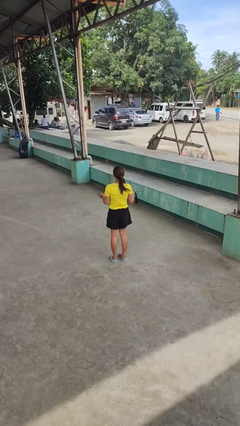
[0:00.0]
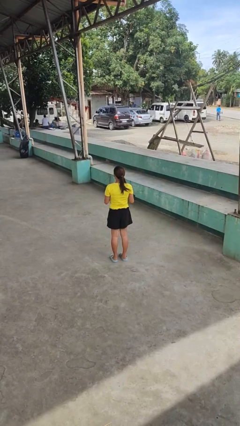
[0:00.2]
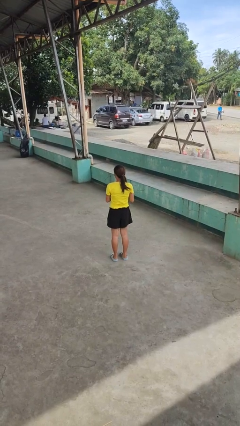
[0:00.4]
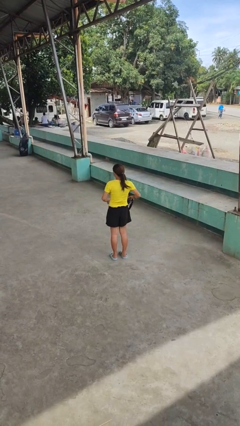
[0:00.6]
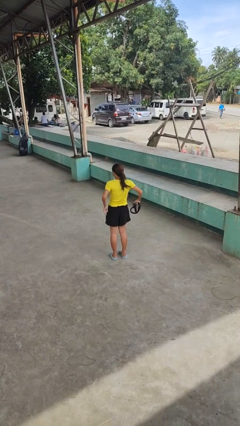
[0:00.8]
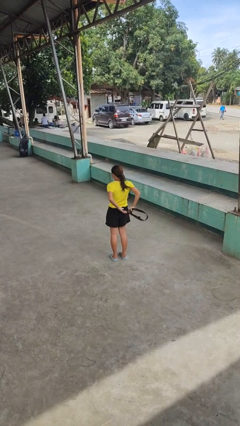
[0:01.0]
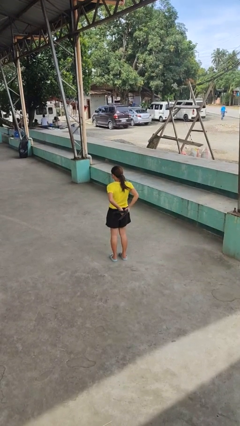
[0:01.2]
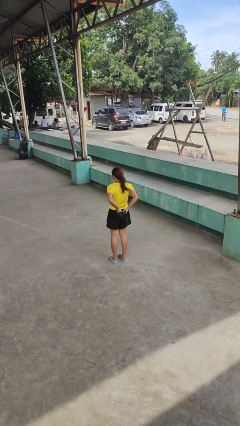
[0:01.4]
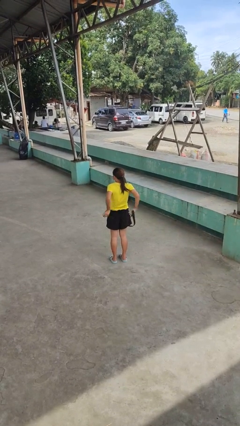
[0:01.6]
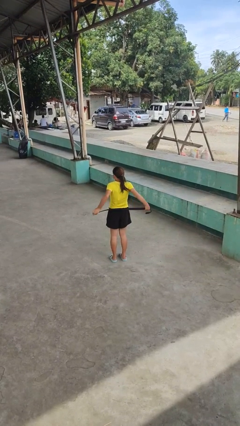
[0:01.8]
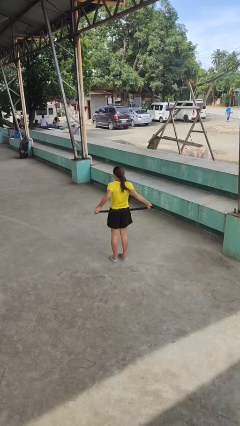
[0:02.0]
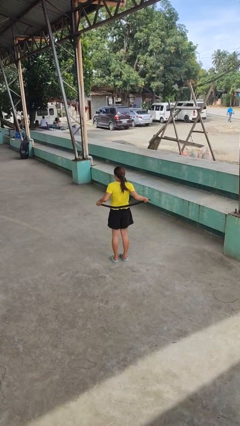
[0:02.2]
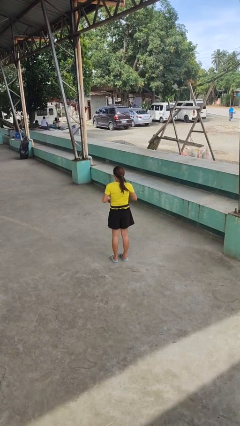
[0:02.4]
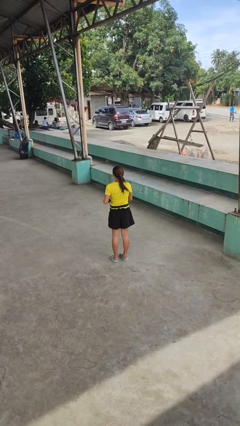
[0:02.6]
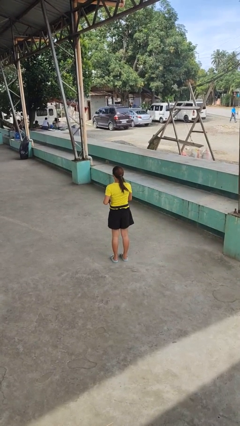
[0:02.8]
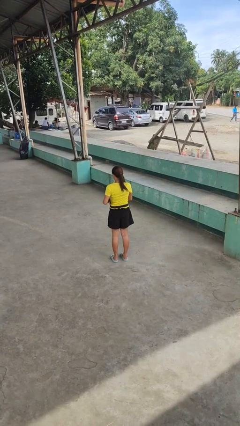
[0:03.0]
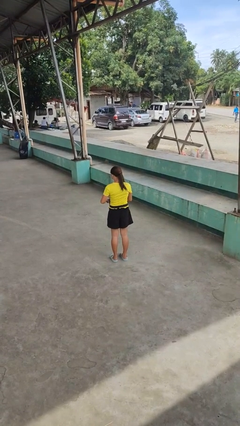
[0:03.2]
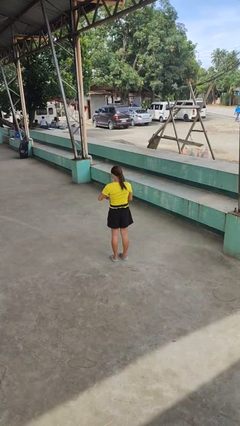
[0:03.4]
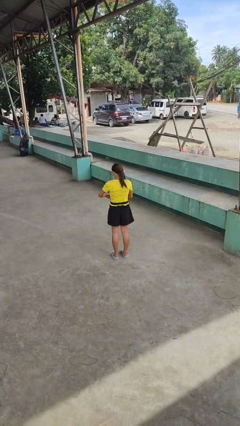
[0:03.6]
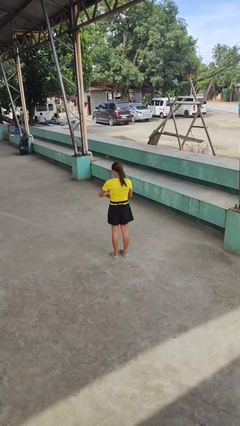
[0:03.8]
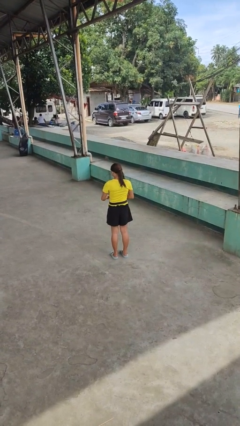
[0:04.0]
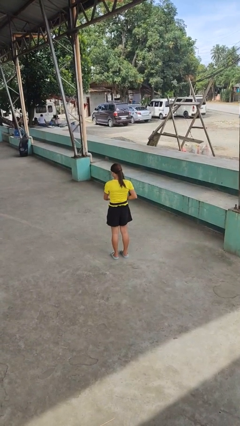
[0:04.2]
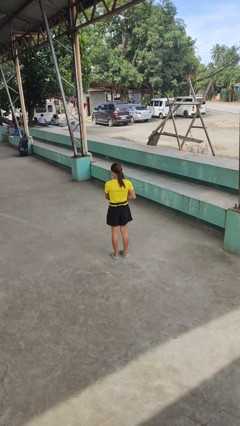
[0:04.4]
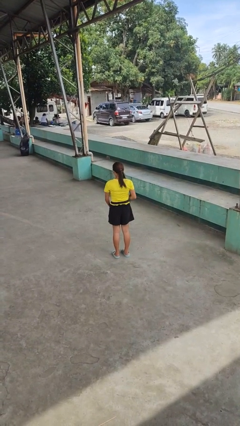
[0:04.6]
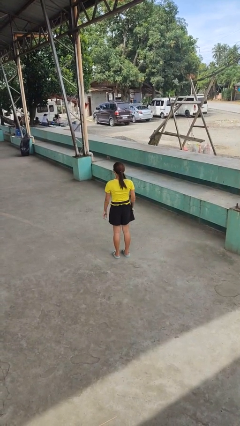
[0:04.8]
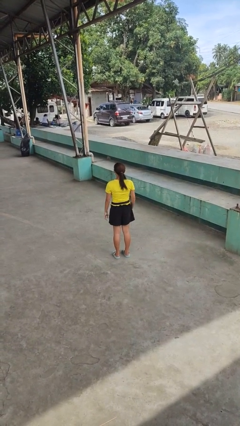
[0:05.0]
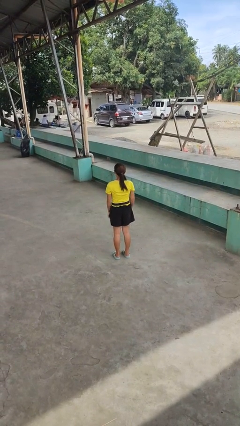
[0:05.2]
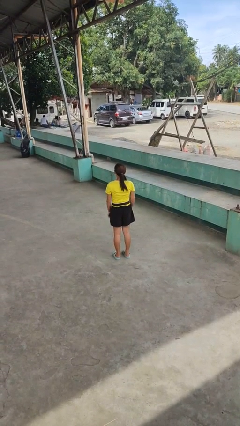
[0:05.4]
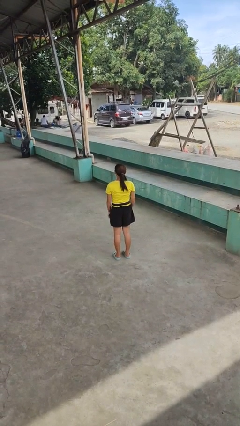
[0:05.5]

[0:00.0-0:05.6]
person puts on belt

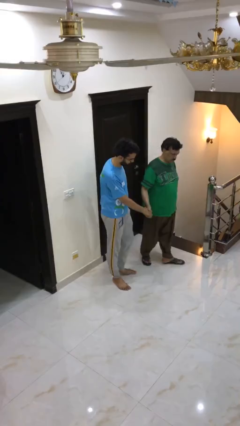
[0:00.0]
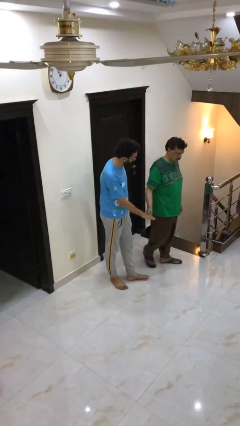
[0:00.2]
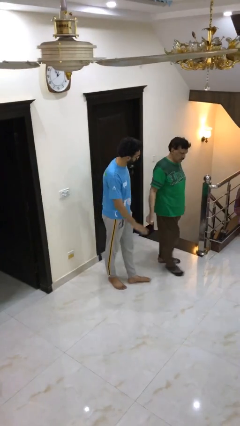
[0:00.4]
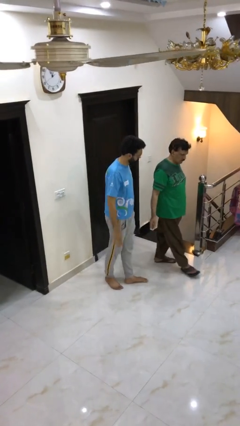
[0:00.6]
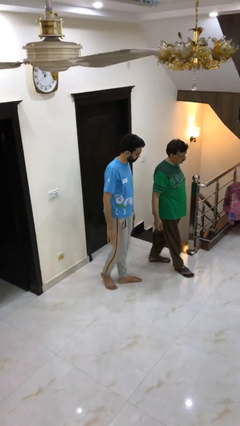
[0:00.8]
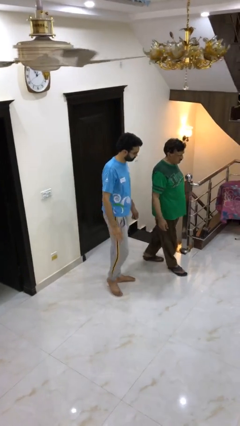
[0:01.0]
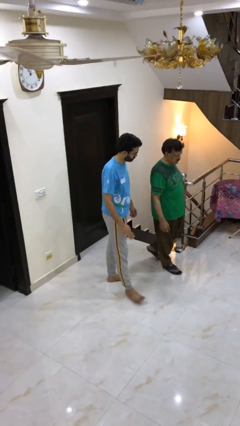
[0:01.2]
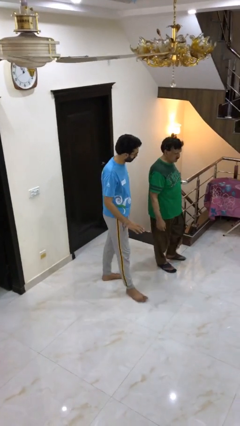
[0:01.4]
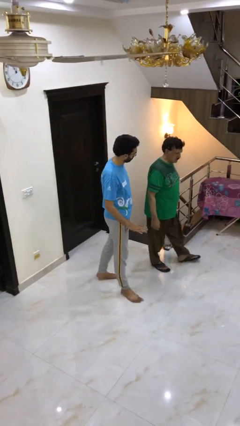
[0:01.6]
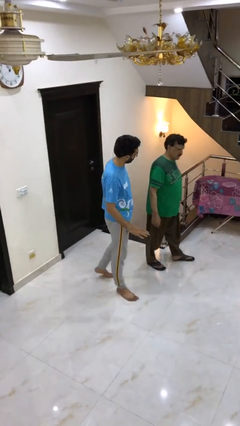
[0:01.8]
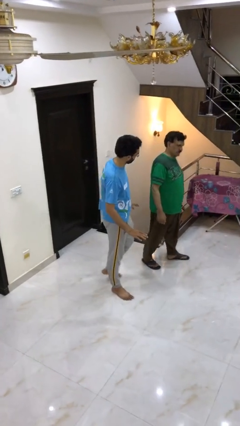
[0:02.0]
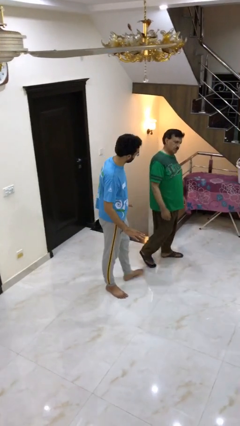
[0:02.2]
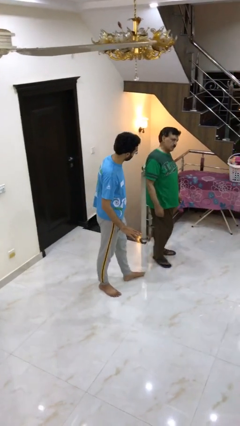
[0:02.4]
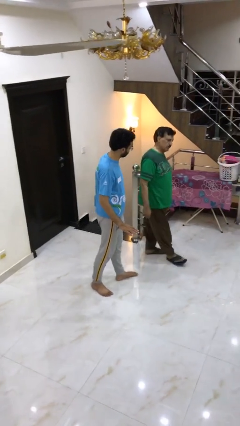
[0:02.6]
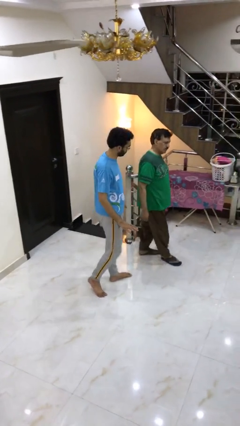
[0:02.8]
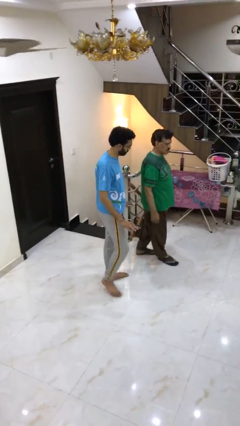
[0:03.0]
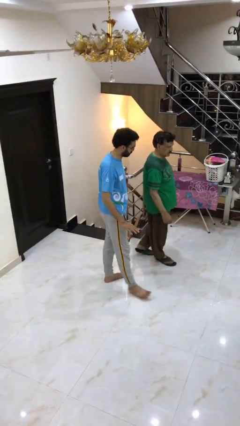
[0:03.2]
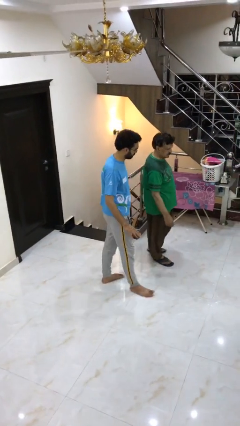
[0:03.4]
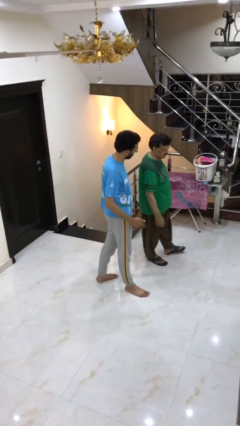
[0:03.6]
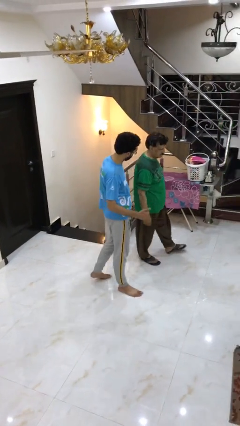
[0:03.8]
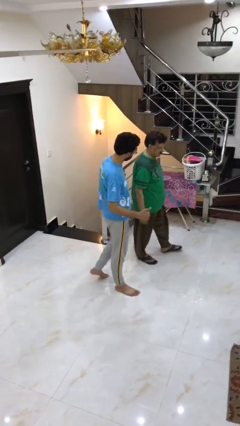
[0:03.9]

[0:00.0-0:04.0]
person talks to person

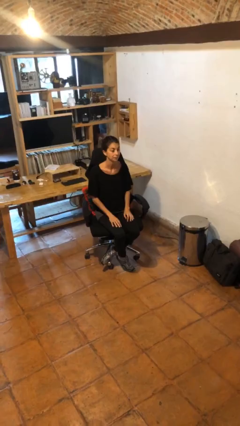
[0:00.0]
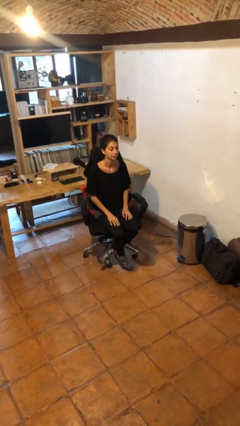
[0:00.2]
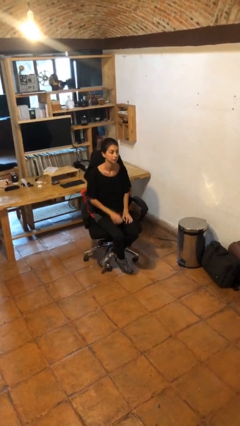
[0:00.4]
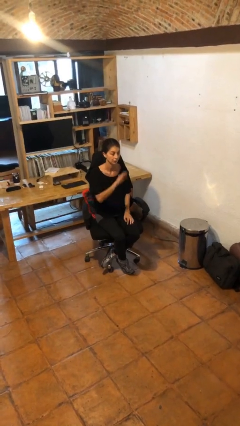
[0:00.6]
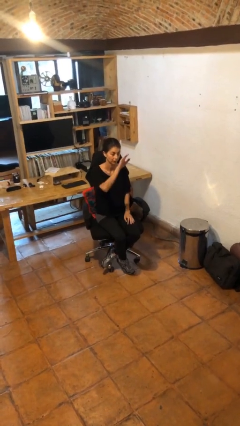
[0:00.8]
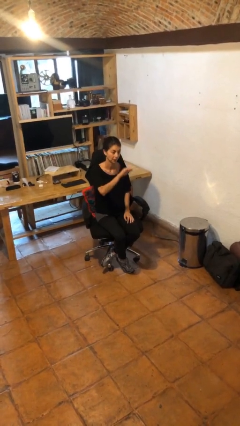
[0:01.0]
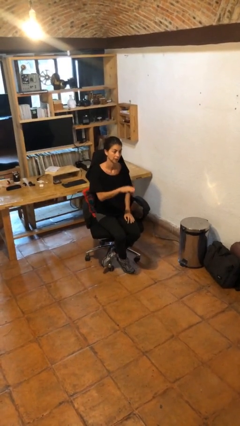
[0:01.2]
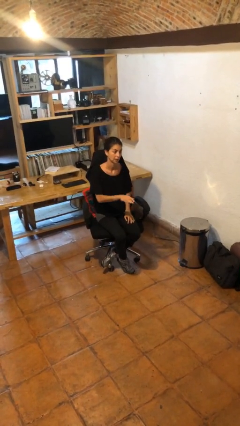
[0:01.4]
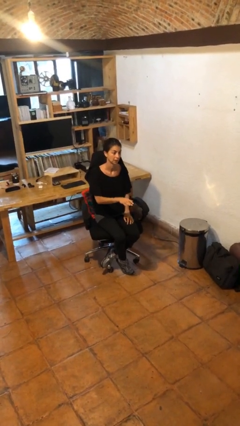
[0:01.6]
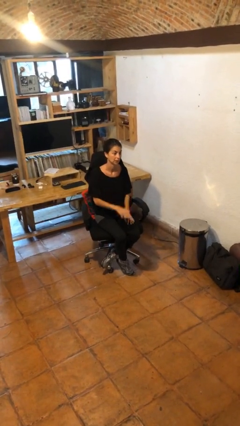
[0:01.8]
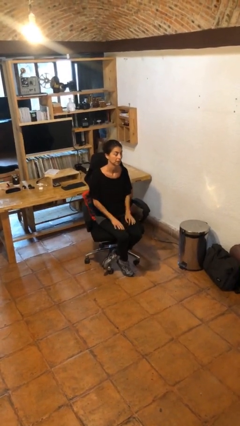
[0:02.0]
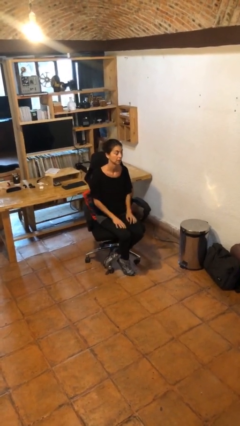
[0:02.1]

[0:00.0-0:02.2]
person gestures swipe down

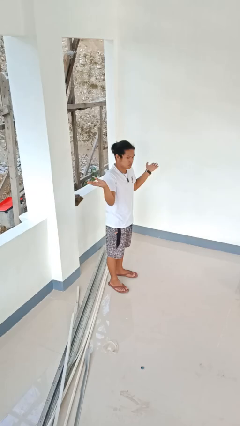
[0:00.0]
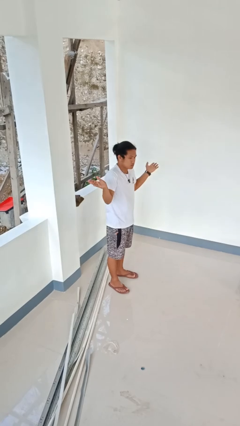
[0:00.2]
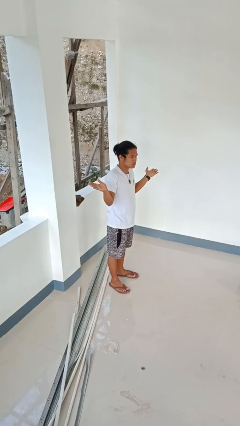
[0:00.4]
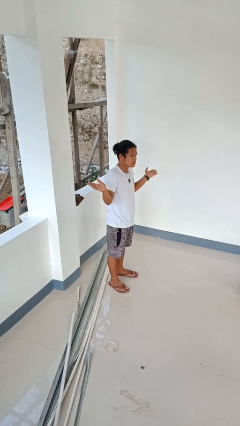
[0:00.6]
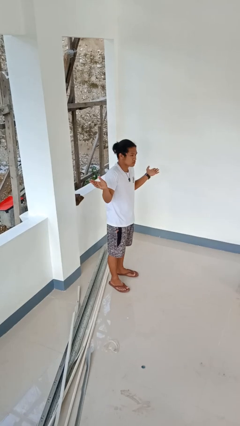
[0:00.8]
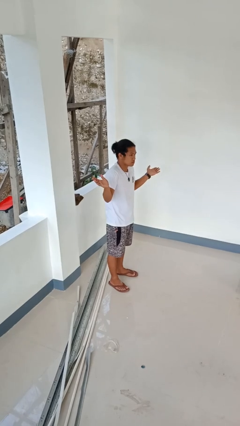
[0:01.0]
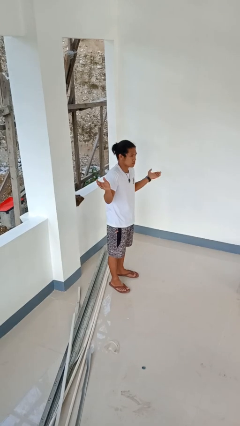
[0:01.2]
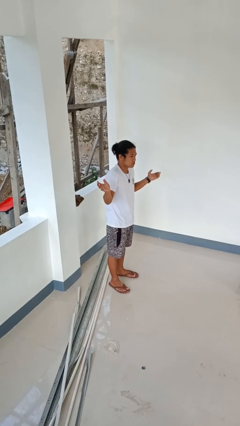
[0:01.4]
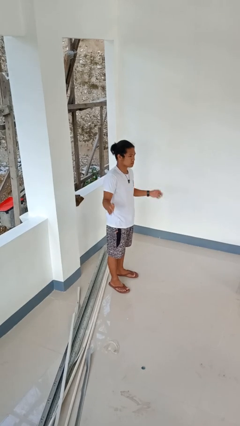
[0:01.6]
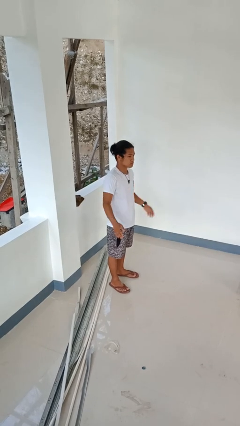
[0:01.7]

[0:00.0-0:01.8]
person shrugs

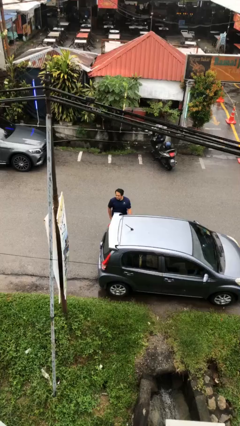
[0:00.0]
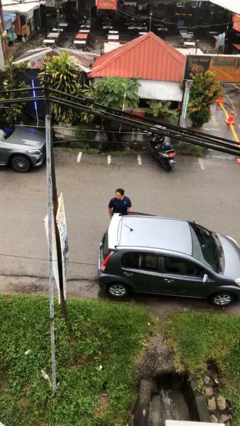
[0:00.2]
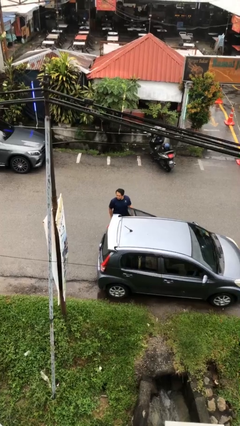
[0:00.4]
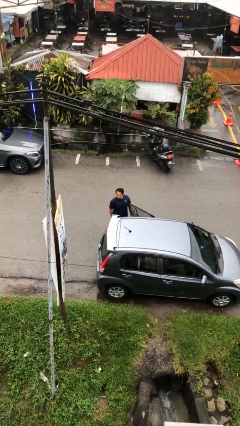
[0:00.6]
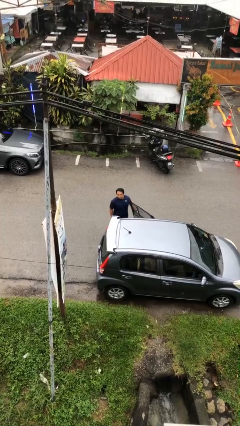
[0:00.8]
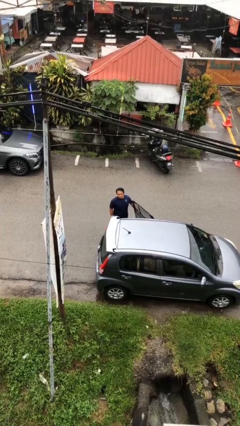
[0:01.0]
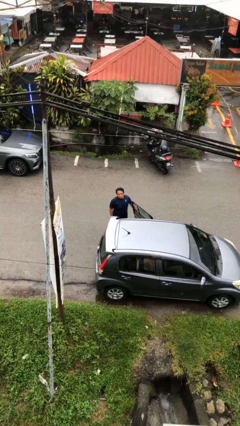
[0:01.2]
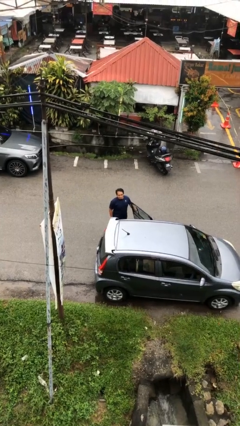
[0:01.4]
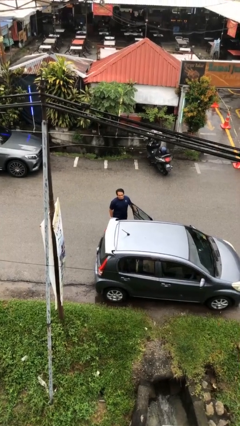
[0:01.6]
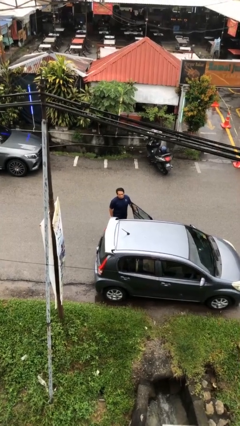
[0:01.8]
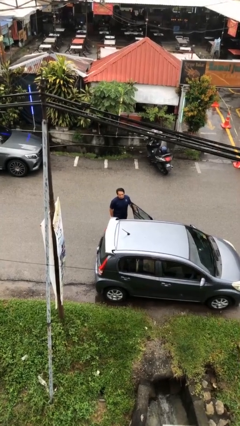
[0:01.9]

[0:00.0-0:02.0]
person opens car door

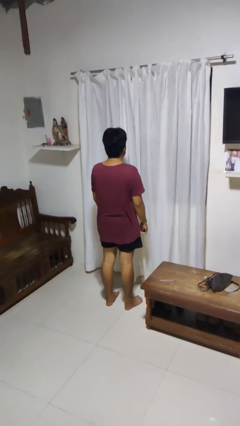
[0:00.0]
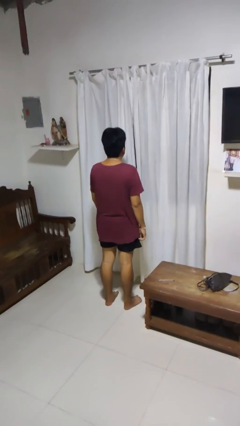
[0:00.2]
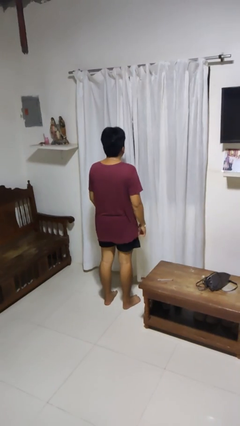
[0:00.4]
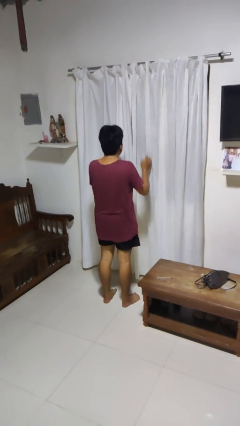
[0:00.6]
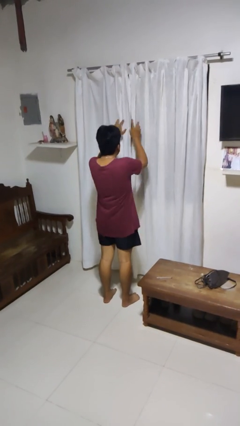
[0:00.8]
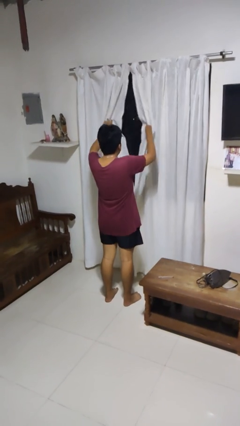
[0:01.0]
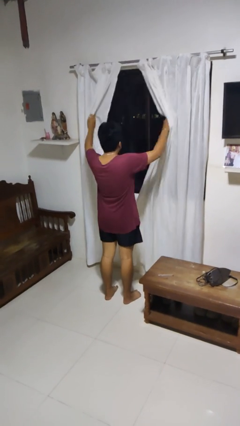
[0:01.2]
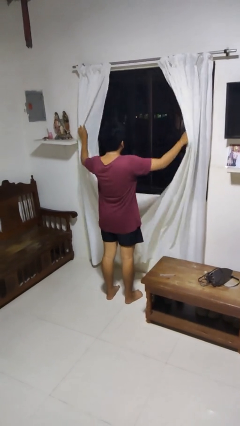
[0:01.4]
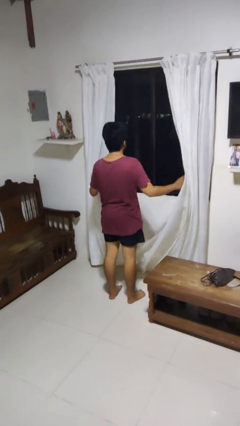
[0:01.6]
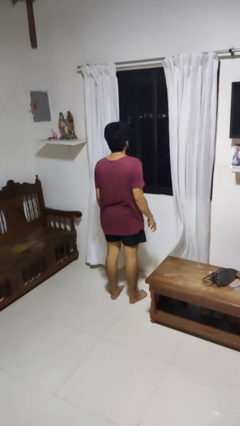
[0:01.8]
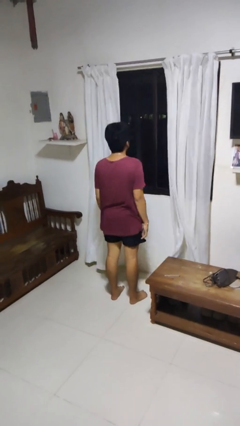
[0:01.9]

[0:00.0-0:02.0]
person opens curtains
